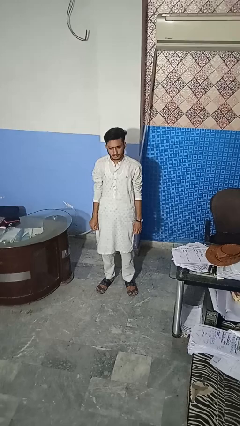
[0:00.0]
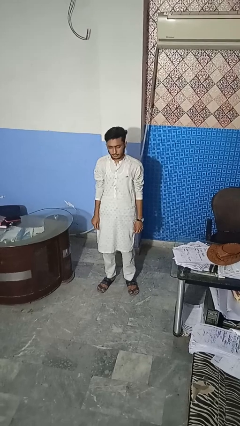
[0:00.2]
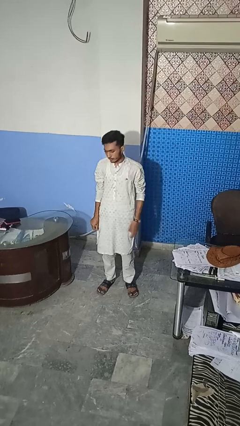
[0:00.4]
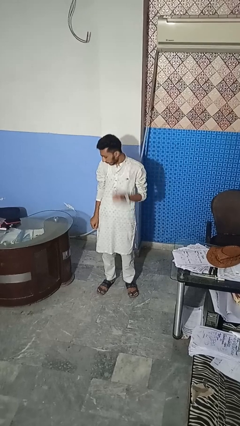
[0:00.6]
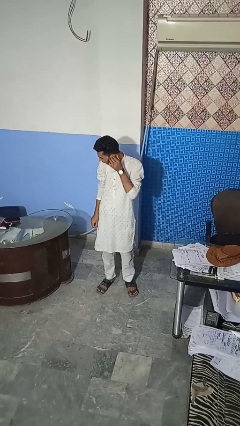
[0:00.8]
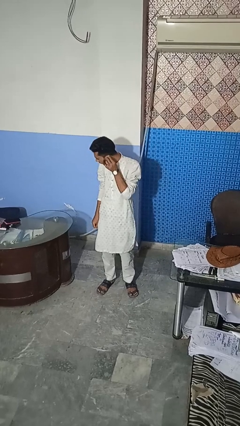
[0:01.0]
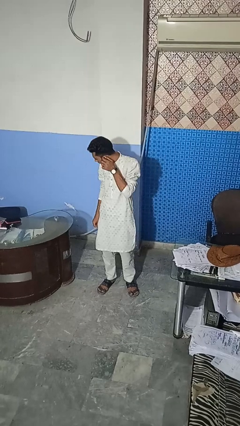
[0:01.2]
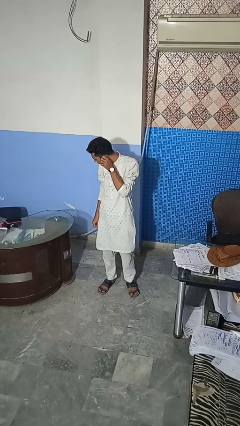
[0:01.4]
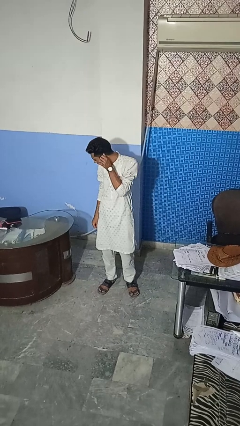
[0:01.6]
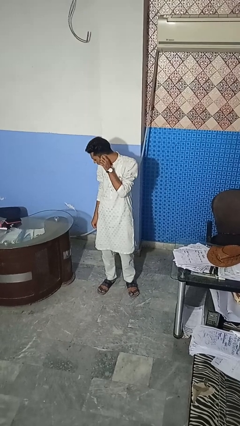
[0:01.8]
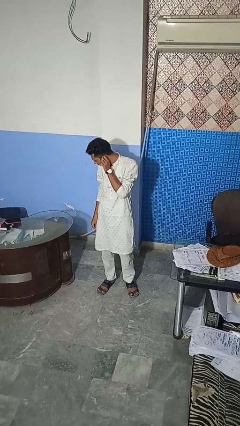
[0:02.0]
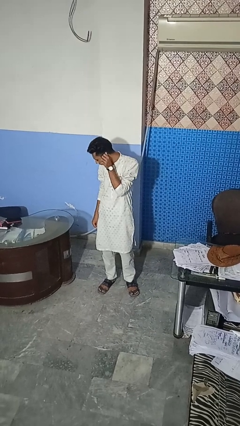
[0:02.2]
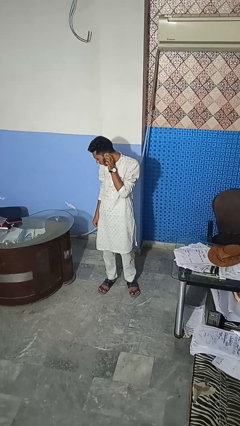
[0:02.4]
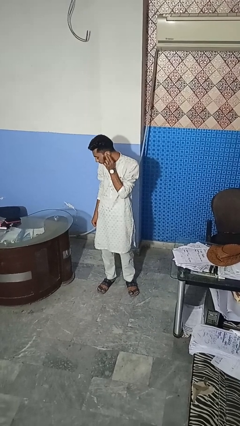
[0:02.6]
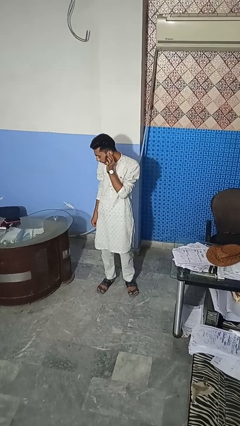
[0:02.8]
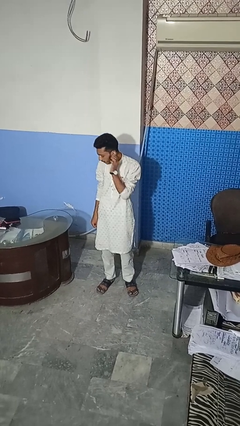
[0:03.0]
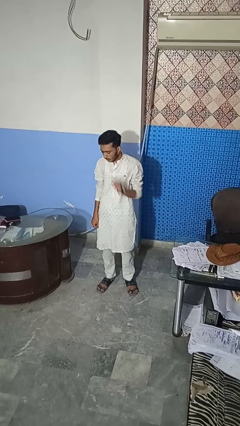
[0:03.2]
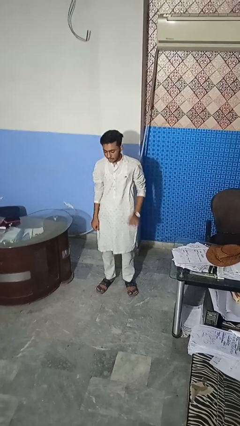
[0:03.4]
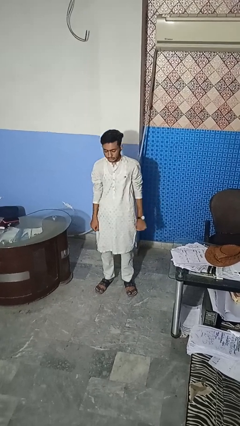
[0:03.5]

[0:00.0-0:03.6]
person touches earlobe

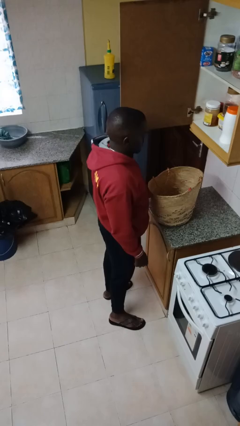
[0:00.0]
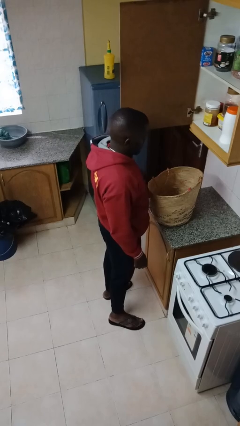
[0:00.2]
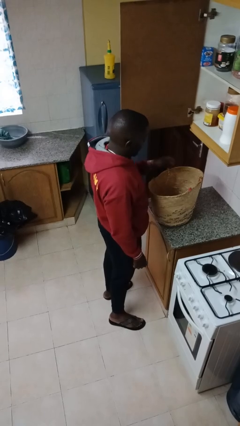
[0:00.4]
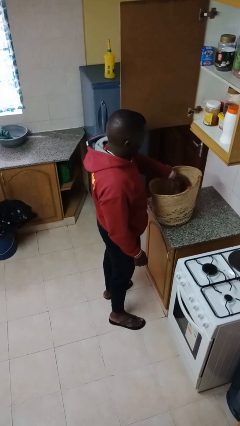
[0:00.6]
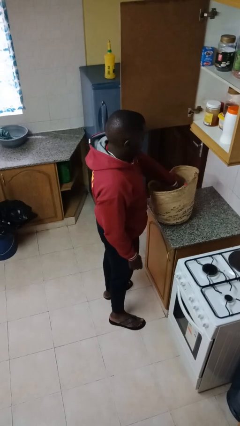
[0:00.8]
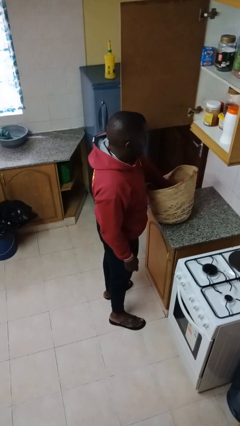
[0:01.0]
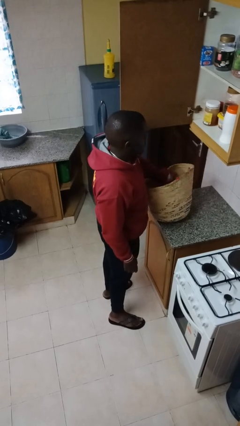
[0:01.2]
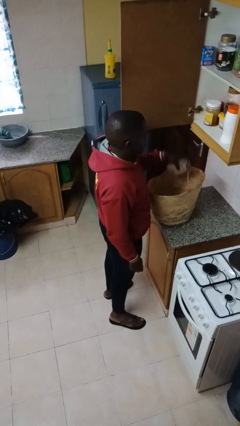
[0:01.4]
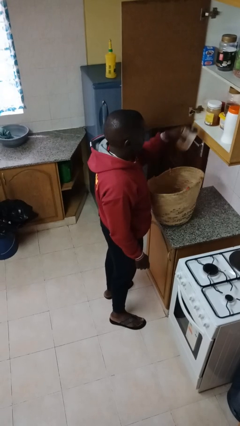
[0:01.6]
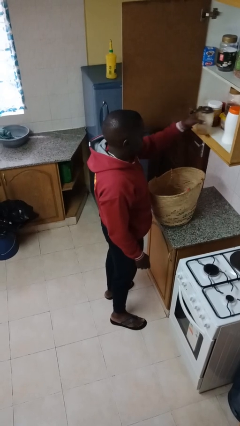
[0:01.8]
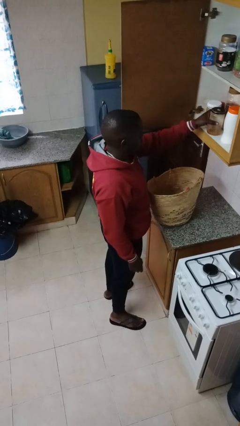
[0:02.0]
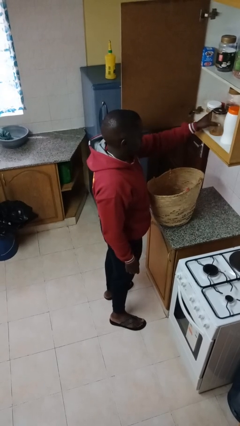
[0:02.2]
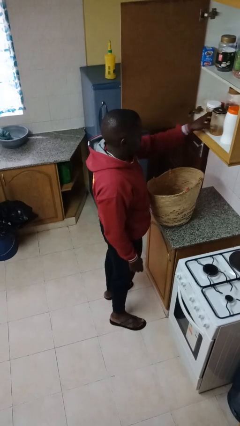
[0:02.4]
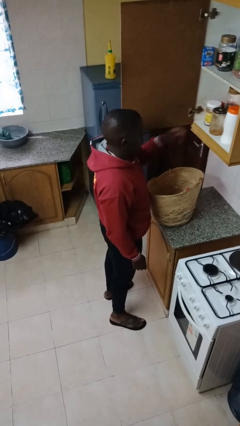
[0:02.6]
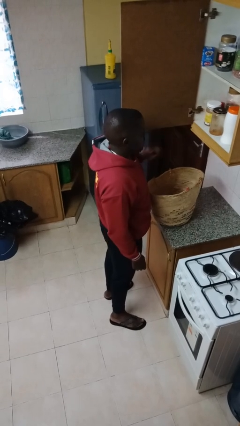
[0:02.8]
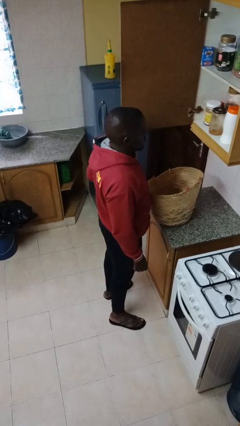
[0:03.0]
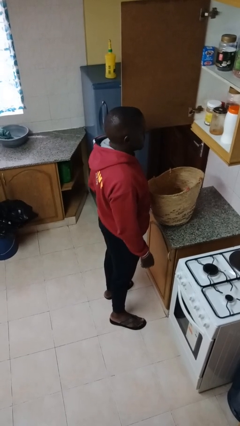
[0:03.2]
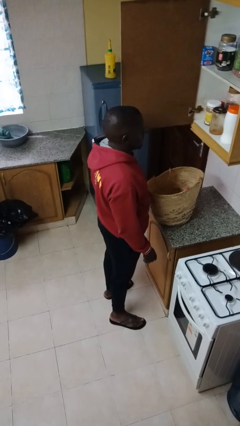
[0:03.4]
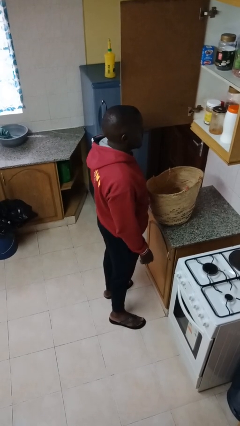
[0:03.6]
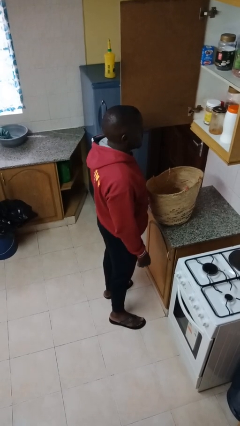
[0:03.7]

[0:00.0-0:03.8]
person loads groceries into cabinet

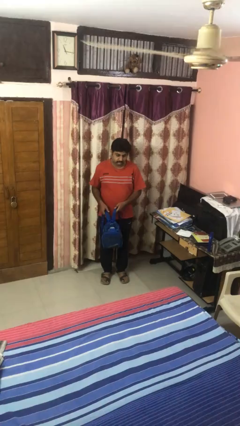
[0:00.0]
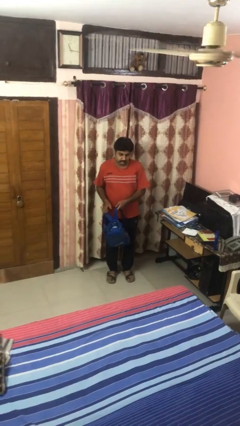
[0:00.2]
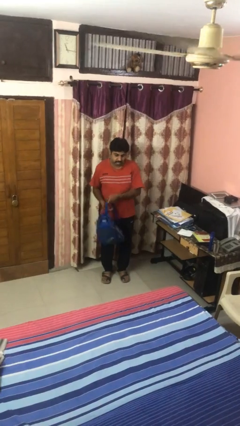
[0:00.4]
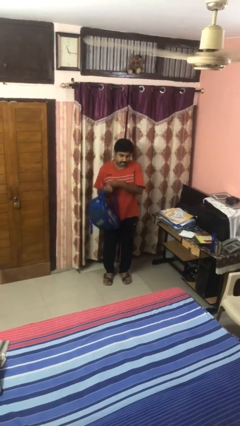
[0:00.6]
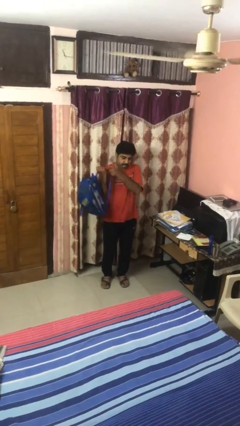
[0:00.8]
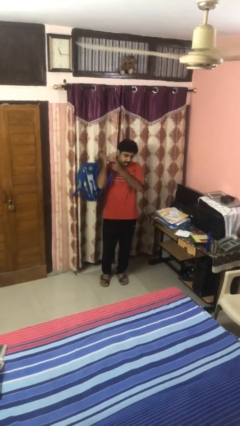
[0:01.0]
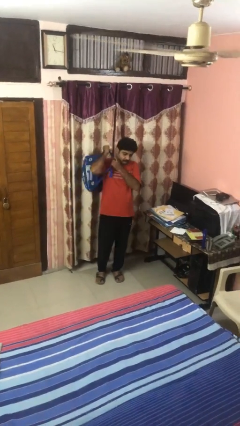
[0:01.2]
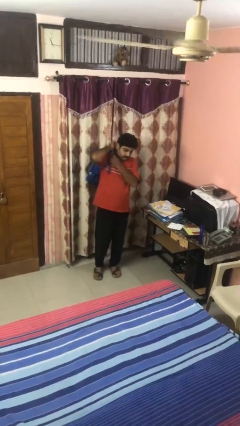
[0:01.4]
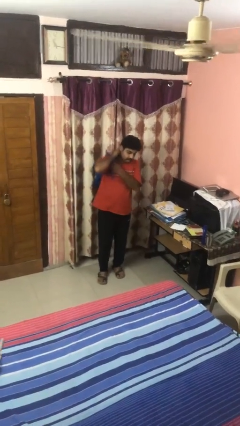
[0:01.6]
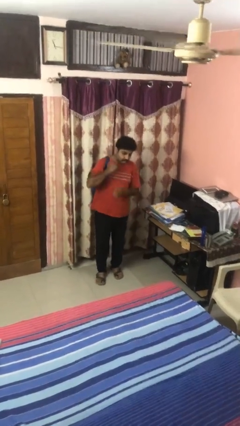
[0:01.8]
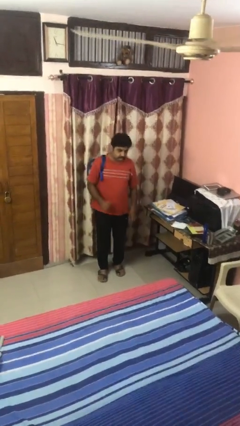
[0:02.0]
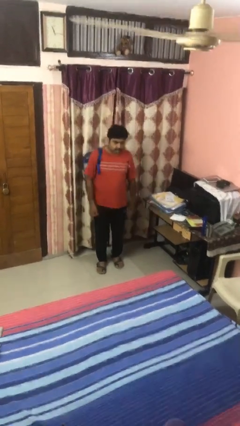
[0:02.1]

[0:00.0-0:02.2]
person puts on backpack

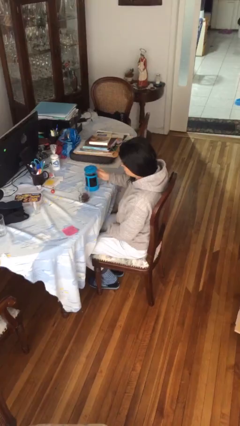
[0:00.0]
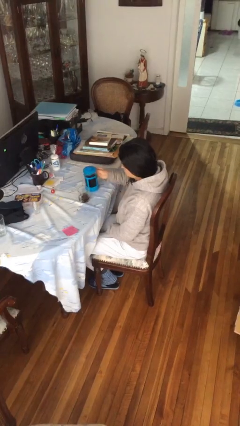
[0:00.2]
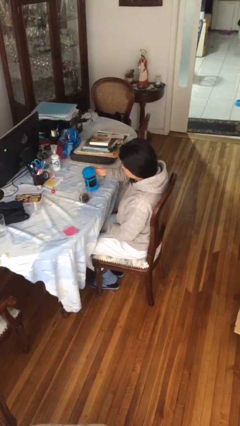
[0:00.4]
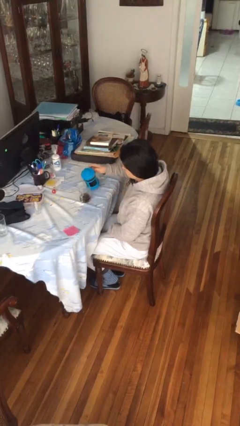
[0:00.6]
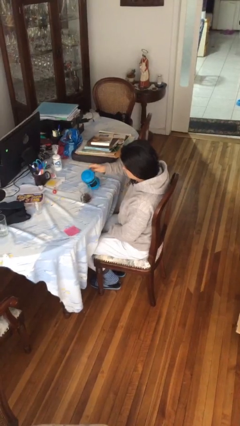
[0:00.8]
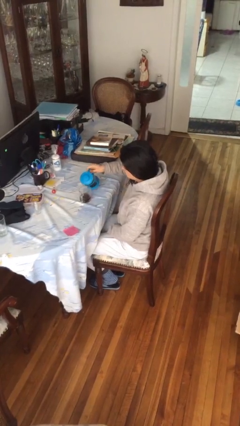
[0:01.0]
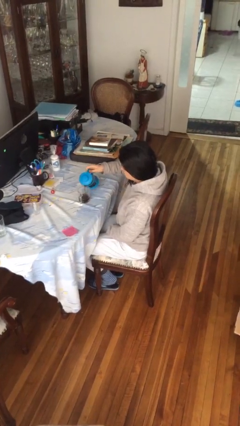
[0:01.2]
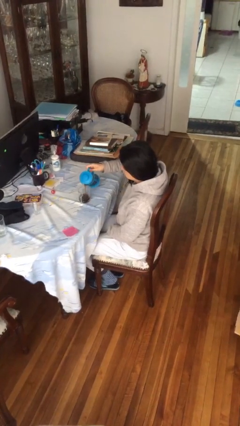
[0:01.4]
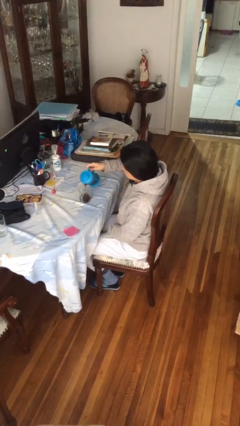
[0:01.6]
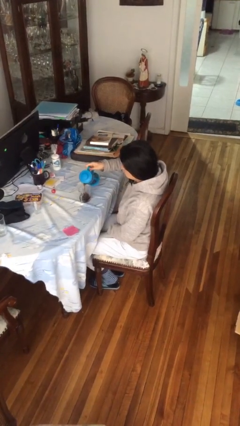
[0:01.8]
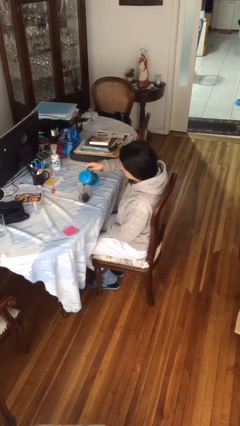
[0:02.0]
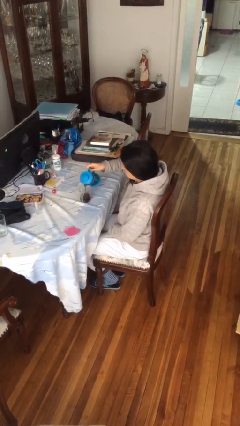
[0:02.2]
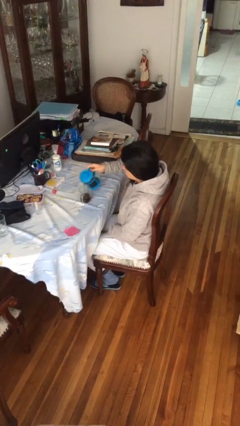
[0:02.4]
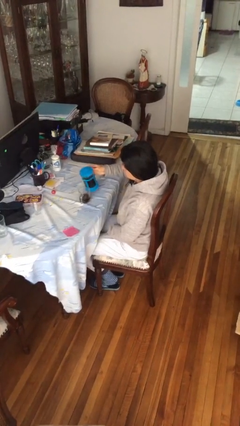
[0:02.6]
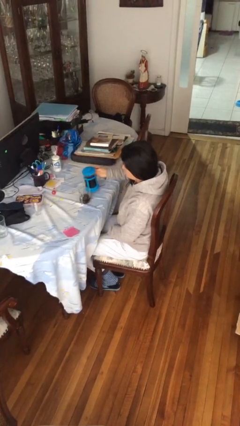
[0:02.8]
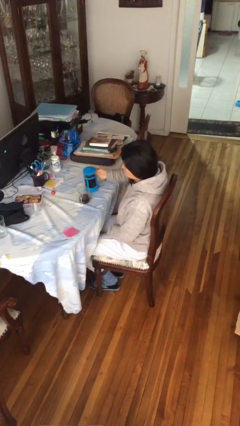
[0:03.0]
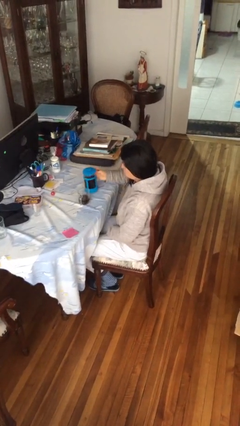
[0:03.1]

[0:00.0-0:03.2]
person pours coffee into mug

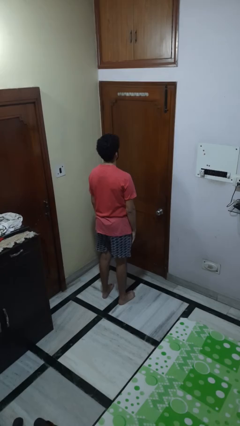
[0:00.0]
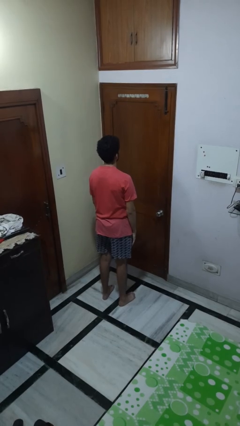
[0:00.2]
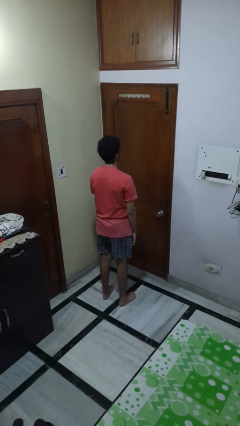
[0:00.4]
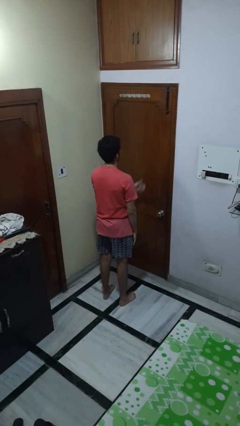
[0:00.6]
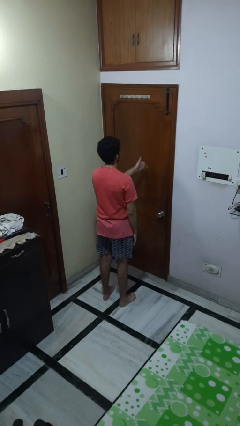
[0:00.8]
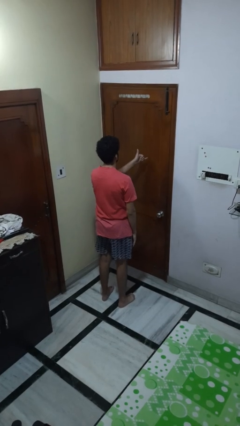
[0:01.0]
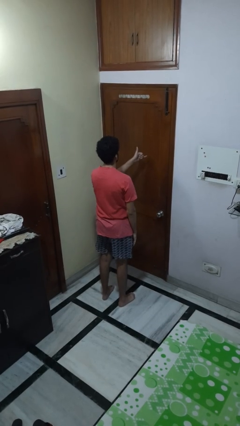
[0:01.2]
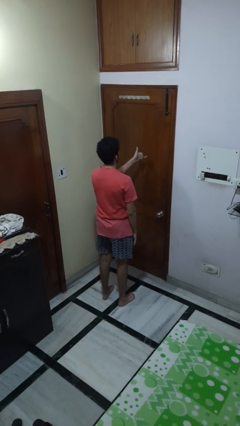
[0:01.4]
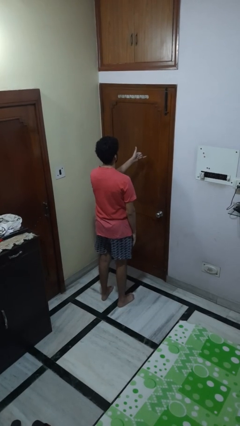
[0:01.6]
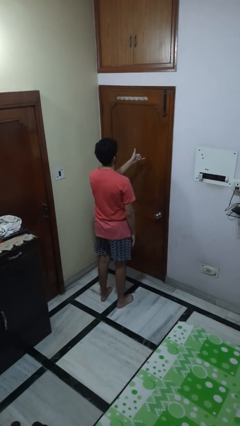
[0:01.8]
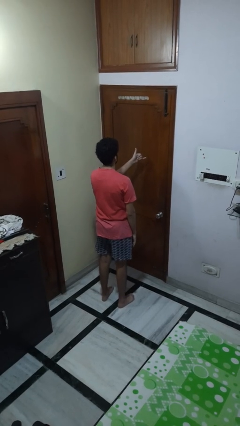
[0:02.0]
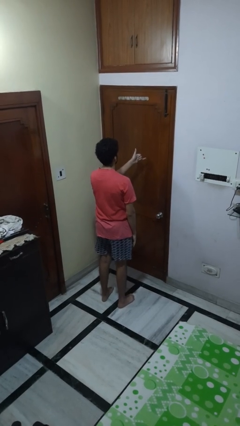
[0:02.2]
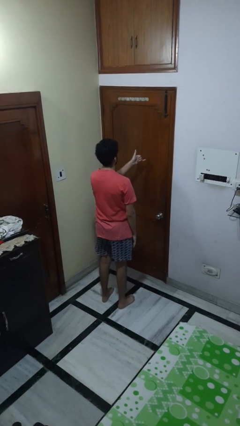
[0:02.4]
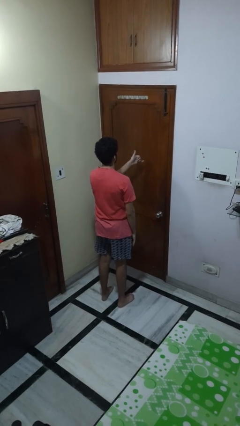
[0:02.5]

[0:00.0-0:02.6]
person gestures hang loose

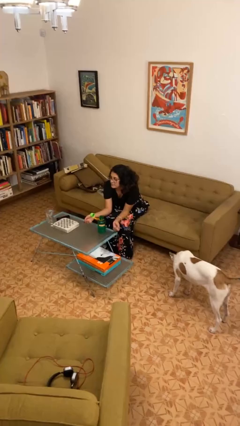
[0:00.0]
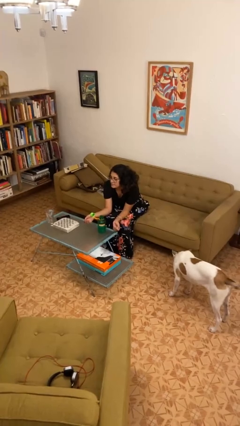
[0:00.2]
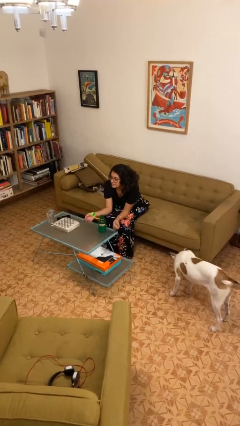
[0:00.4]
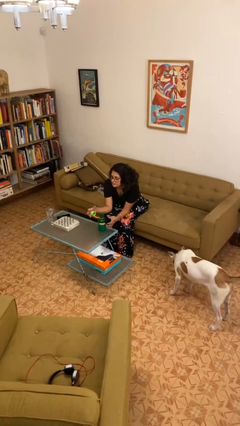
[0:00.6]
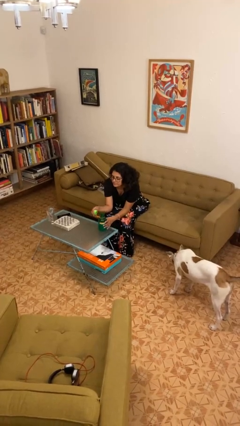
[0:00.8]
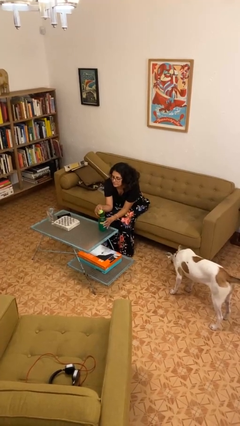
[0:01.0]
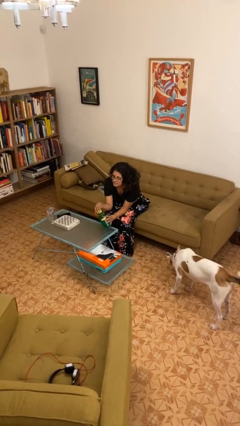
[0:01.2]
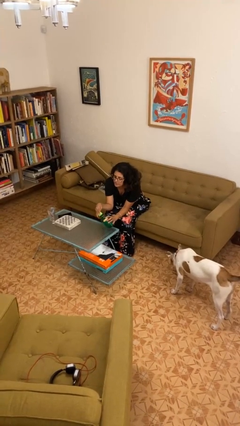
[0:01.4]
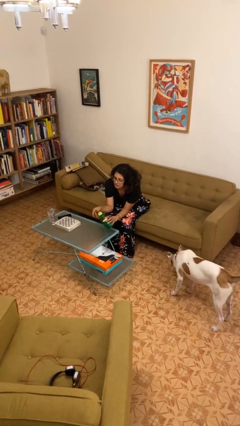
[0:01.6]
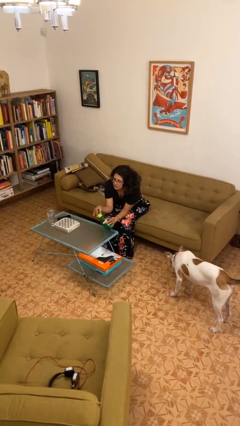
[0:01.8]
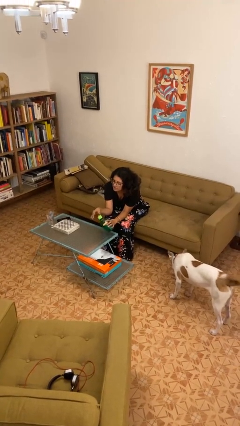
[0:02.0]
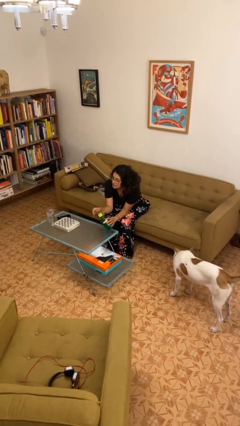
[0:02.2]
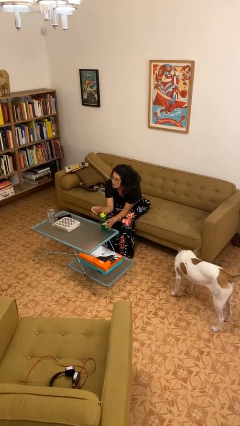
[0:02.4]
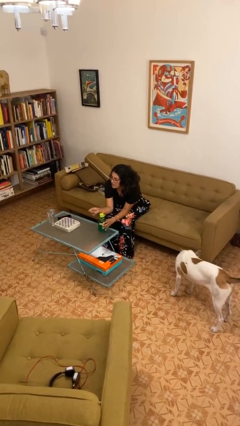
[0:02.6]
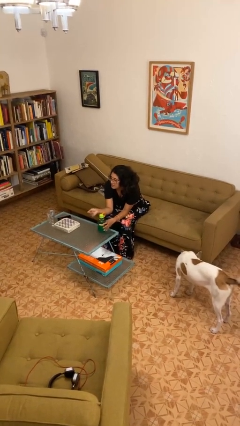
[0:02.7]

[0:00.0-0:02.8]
person screws lid to bottle
